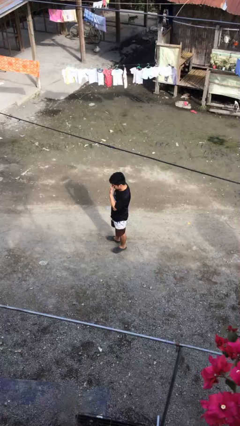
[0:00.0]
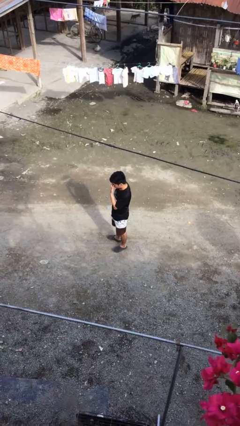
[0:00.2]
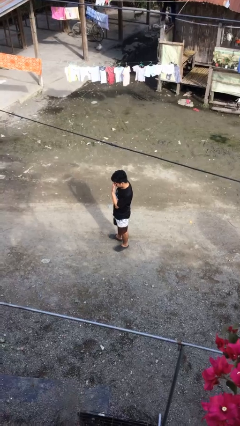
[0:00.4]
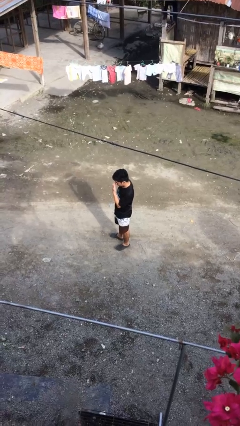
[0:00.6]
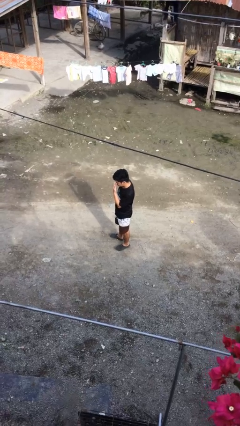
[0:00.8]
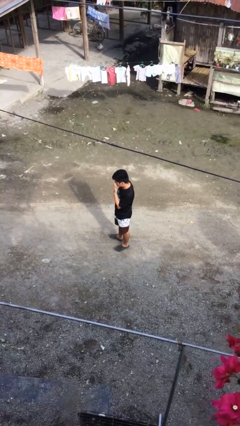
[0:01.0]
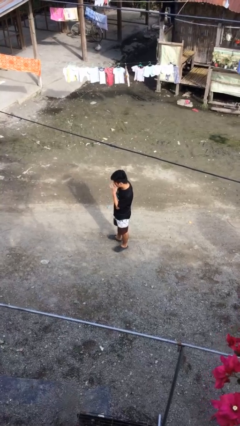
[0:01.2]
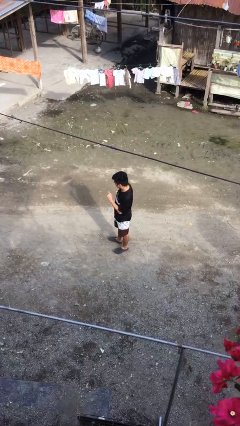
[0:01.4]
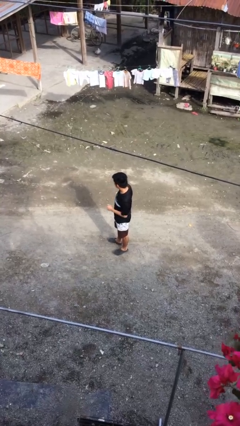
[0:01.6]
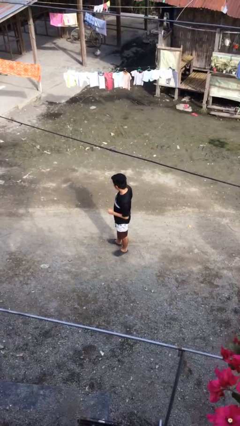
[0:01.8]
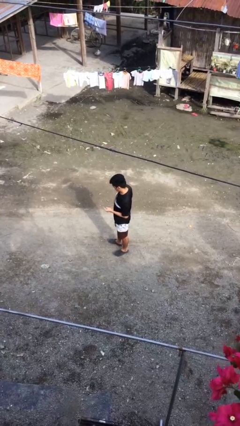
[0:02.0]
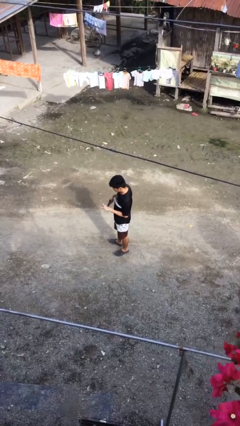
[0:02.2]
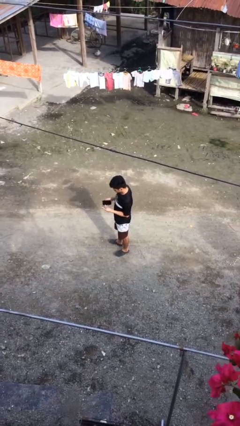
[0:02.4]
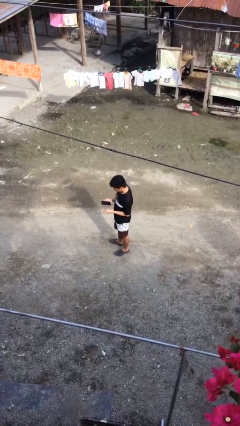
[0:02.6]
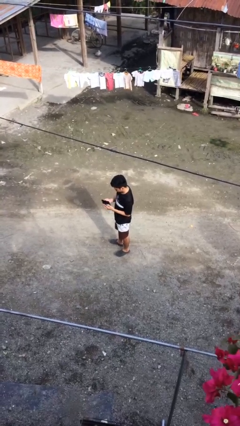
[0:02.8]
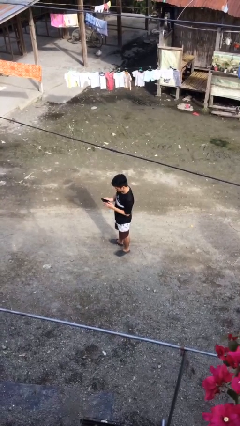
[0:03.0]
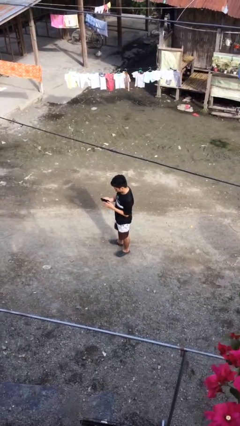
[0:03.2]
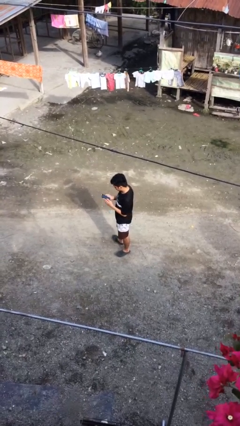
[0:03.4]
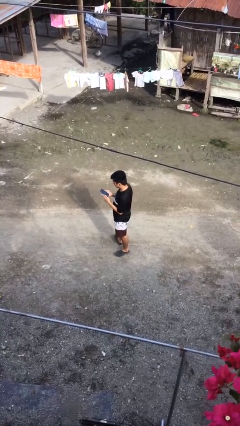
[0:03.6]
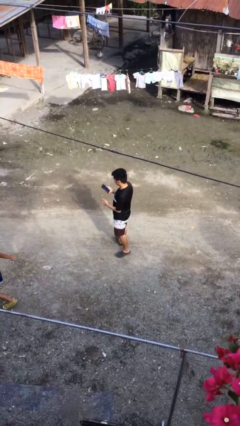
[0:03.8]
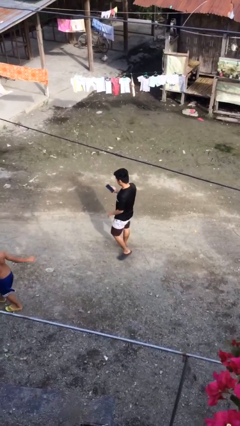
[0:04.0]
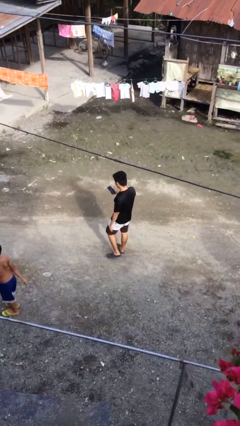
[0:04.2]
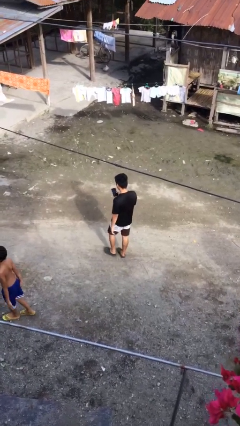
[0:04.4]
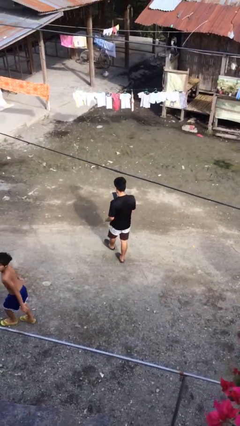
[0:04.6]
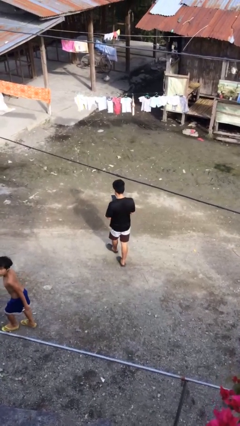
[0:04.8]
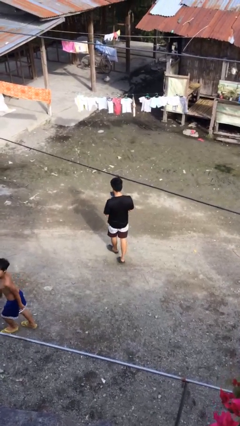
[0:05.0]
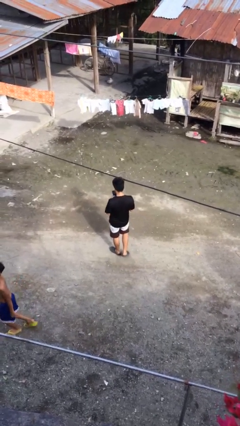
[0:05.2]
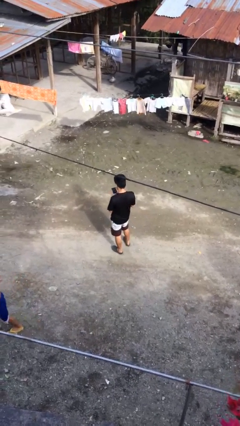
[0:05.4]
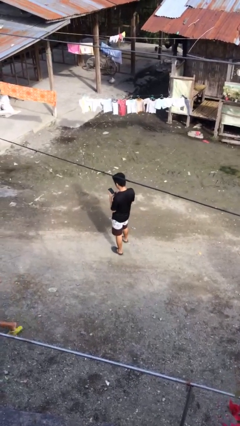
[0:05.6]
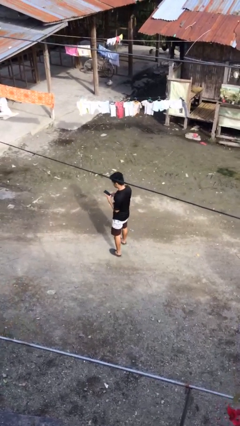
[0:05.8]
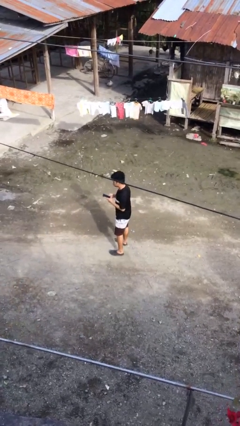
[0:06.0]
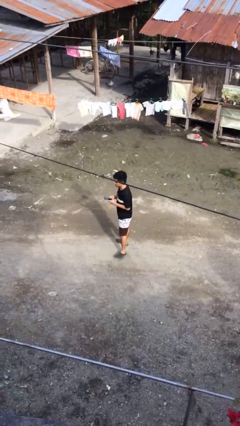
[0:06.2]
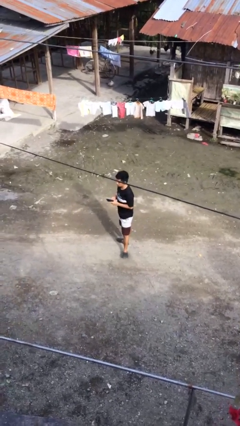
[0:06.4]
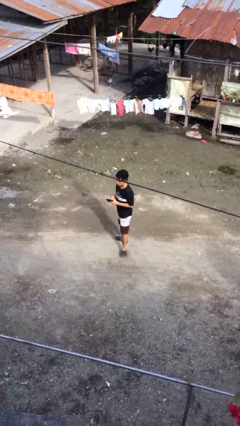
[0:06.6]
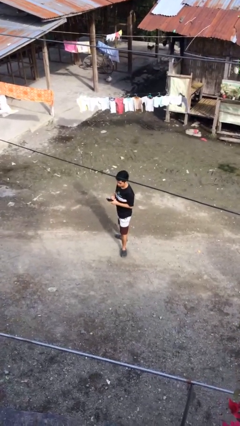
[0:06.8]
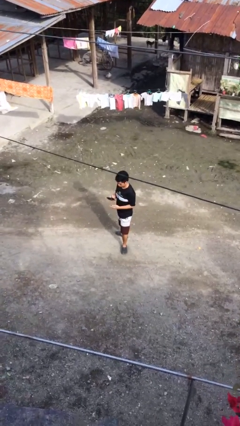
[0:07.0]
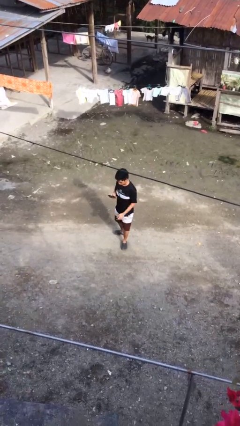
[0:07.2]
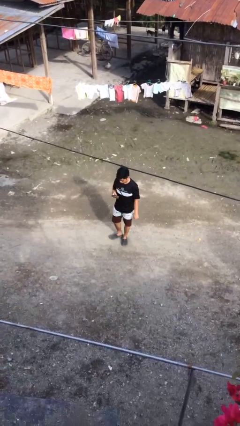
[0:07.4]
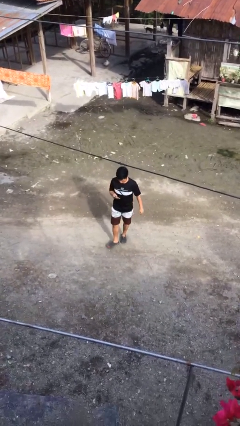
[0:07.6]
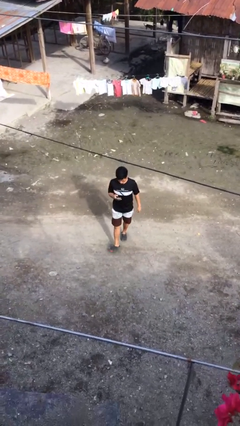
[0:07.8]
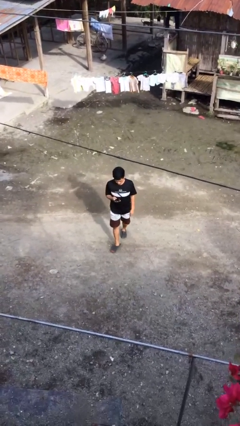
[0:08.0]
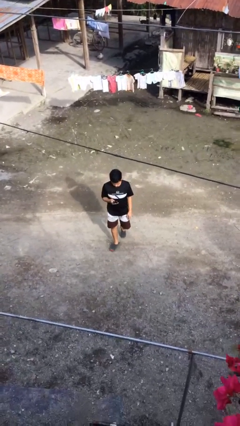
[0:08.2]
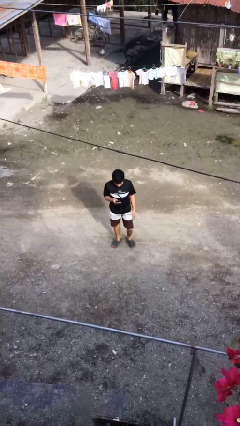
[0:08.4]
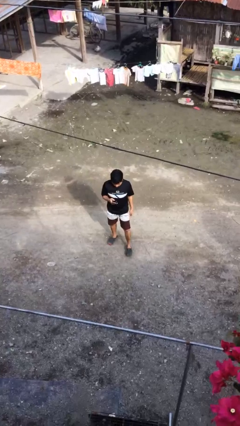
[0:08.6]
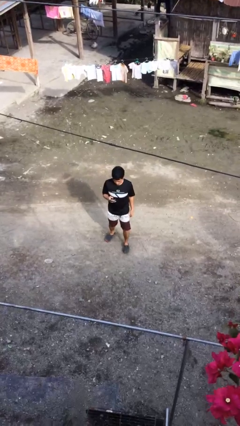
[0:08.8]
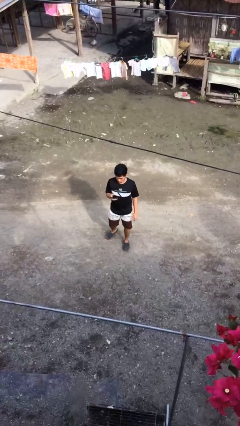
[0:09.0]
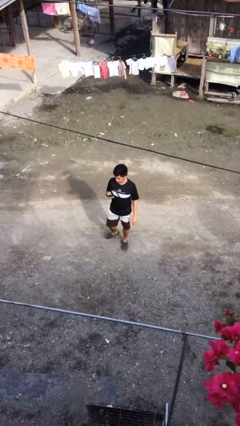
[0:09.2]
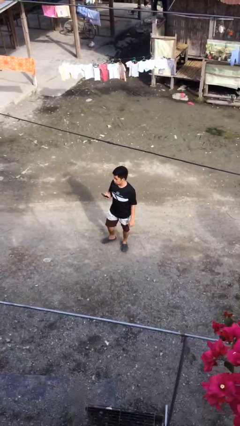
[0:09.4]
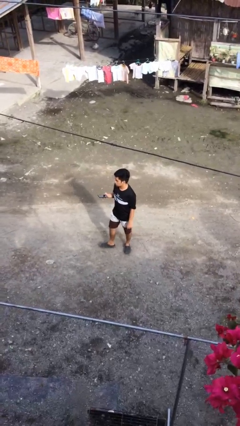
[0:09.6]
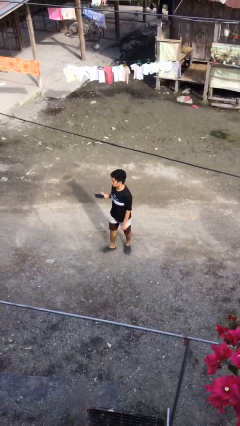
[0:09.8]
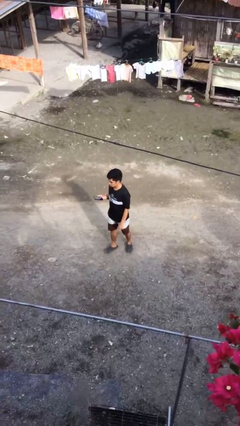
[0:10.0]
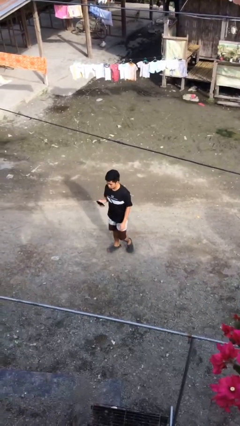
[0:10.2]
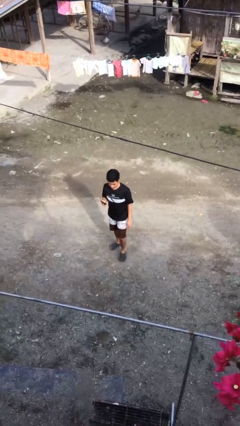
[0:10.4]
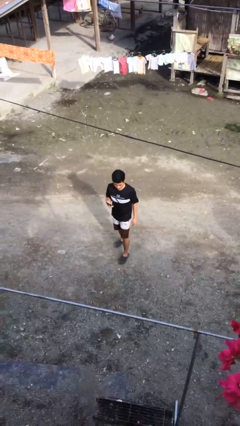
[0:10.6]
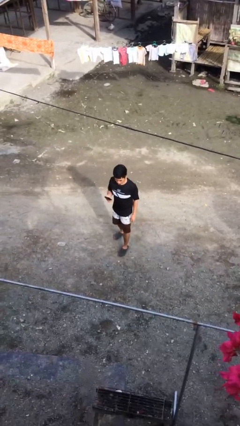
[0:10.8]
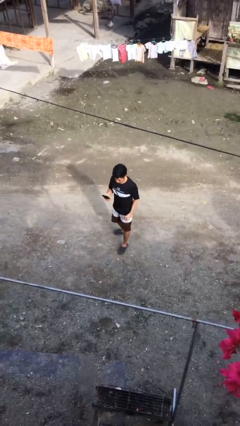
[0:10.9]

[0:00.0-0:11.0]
person walks

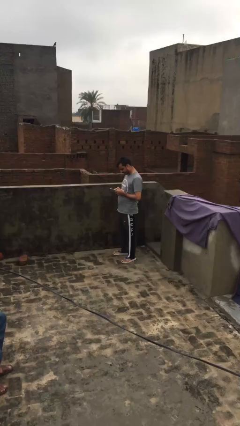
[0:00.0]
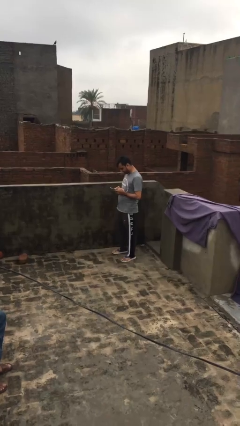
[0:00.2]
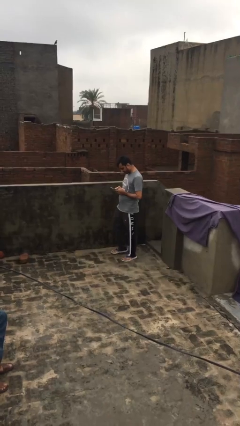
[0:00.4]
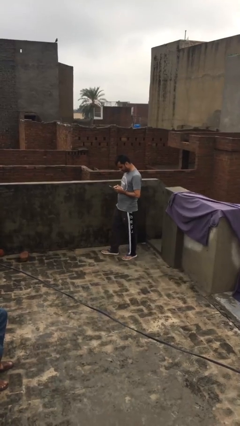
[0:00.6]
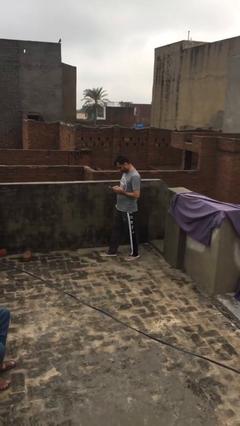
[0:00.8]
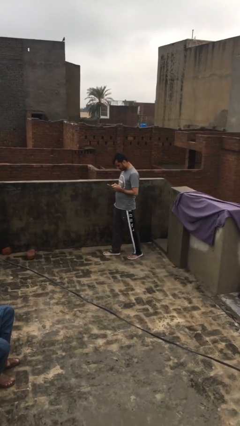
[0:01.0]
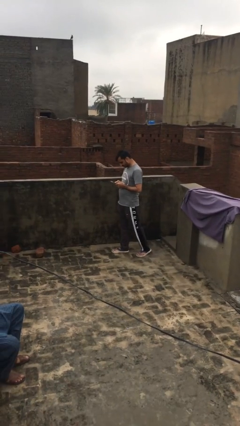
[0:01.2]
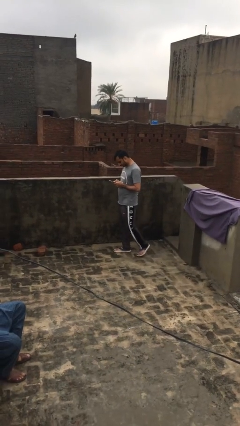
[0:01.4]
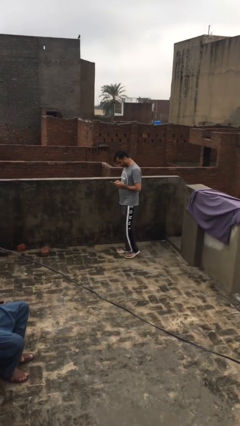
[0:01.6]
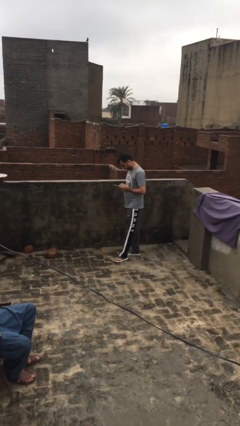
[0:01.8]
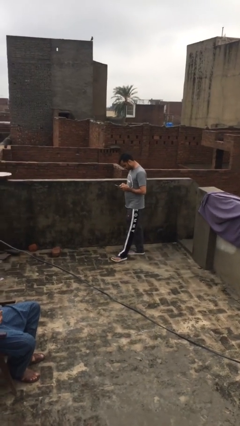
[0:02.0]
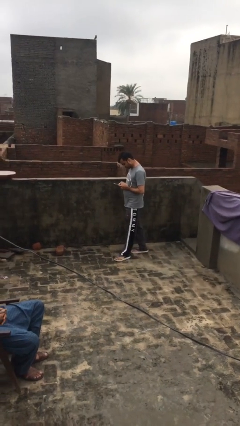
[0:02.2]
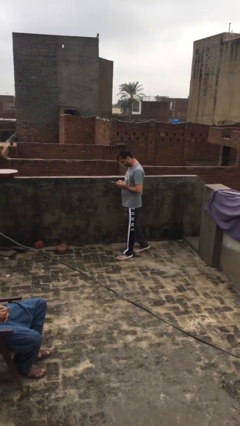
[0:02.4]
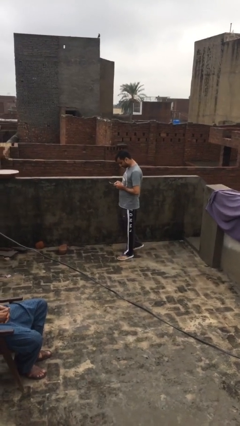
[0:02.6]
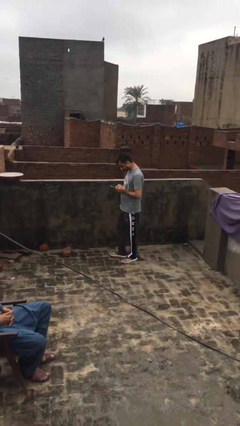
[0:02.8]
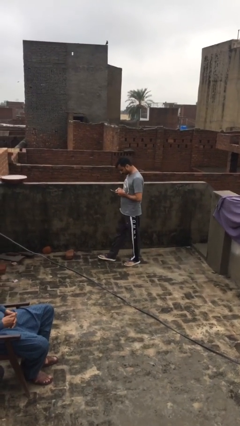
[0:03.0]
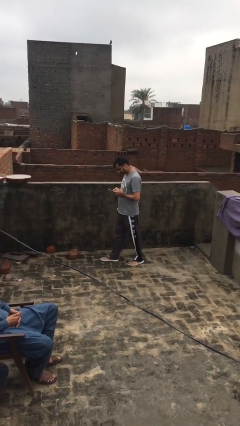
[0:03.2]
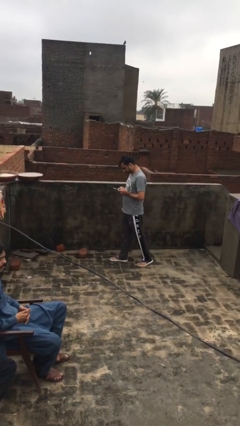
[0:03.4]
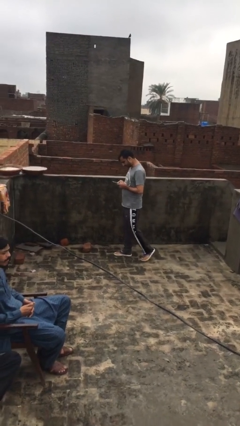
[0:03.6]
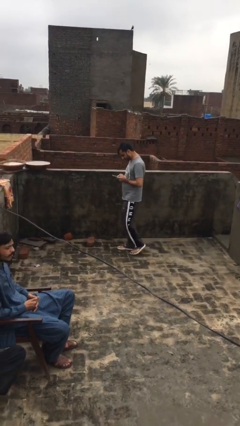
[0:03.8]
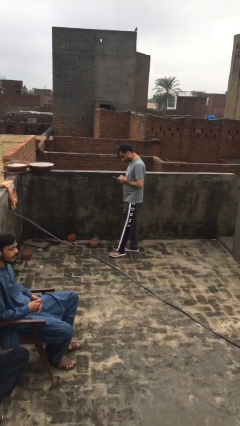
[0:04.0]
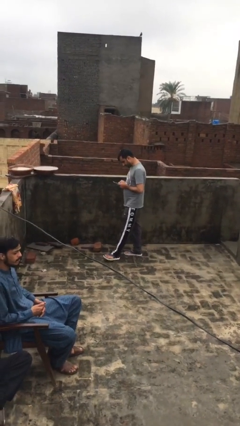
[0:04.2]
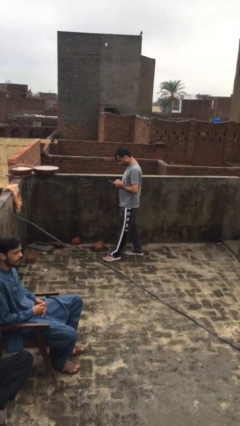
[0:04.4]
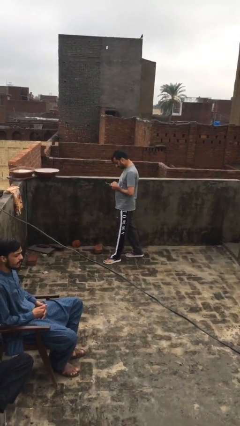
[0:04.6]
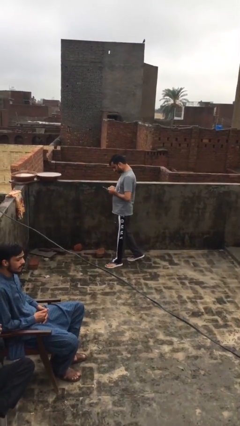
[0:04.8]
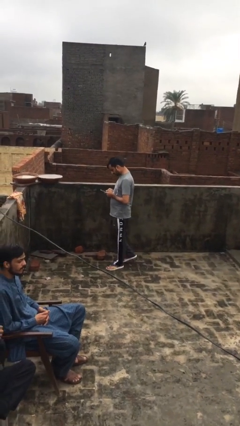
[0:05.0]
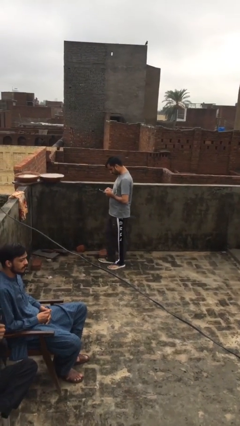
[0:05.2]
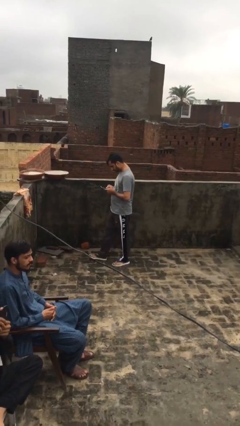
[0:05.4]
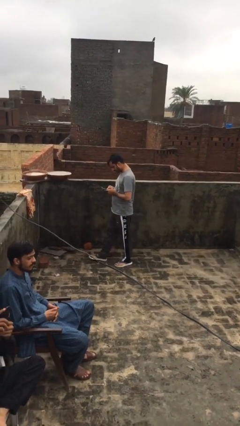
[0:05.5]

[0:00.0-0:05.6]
person texts on phone

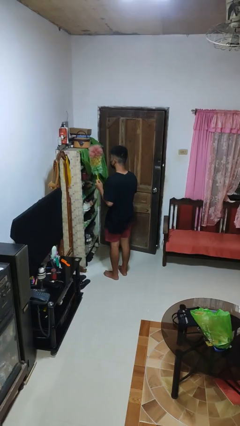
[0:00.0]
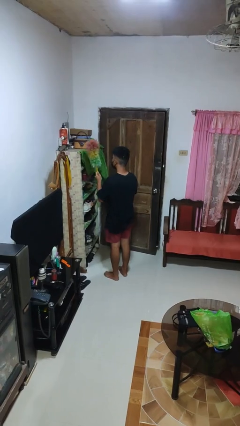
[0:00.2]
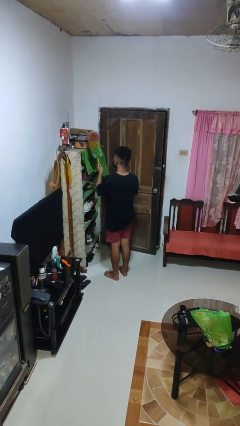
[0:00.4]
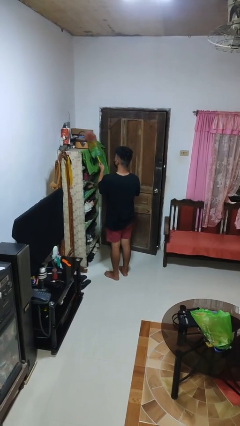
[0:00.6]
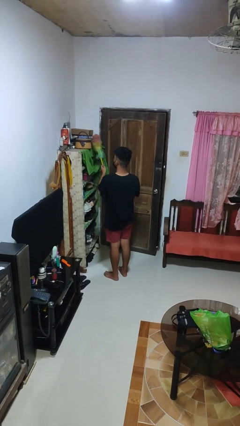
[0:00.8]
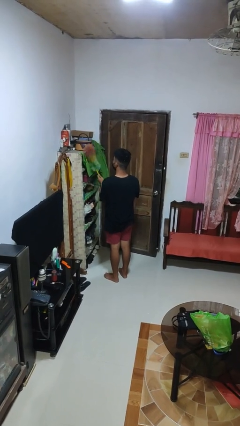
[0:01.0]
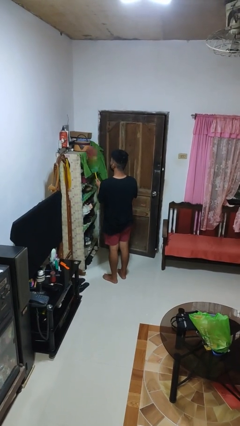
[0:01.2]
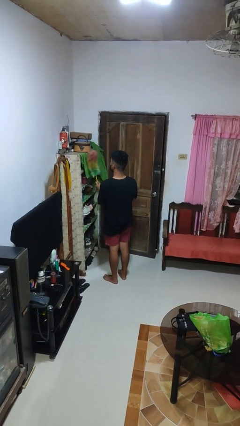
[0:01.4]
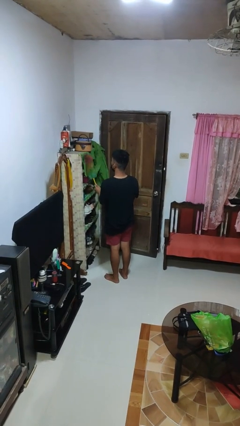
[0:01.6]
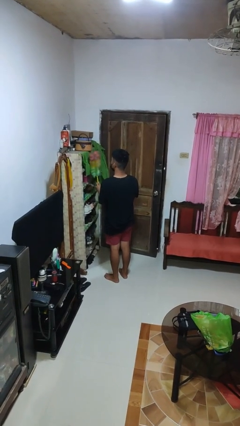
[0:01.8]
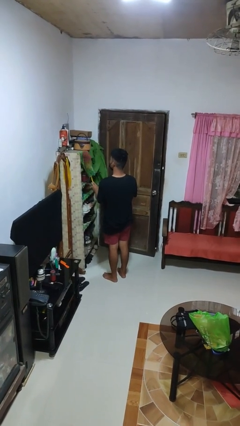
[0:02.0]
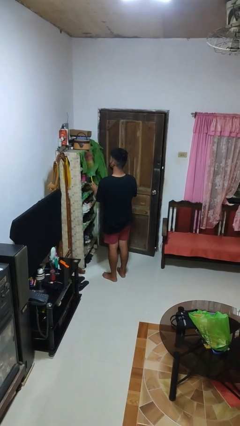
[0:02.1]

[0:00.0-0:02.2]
person dusts furniture
